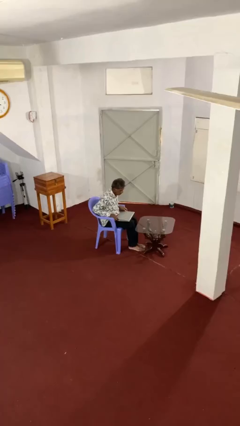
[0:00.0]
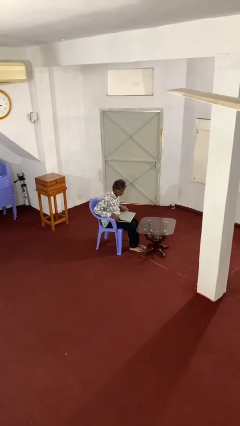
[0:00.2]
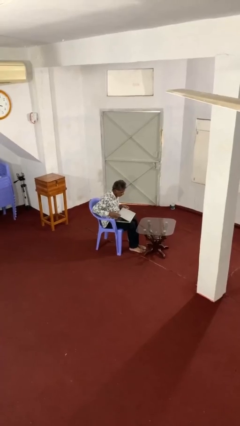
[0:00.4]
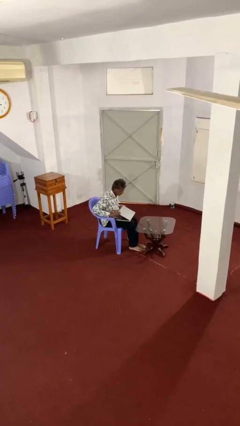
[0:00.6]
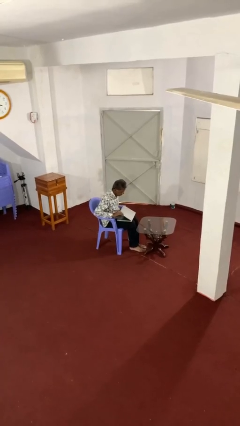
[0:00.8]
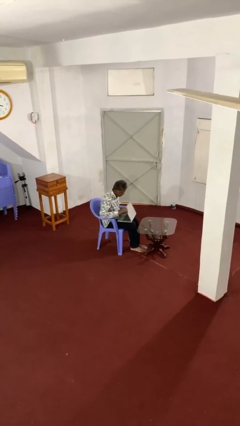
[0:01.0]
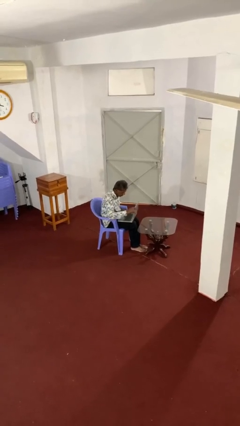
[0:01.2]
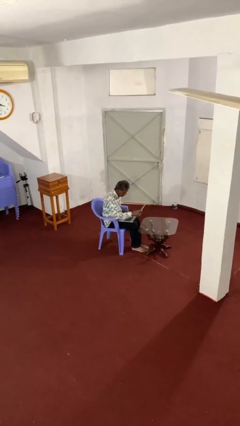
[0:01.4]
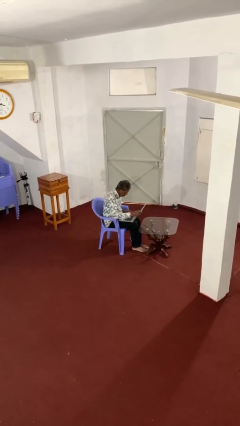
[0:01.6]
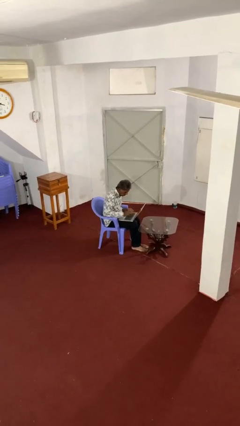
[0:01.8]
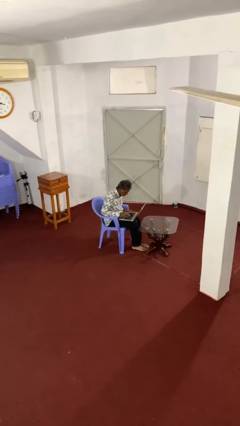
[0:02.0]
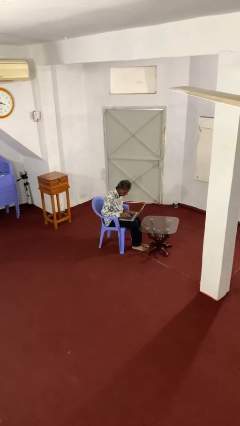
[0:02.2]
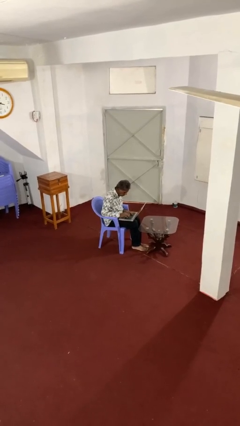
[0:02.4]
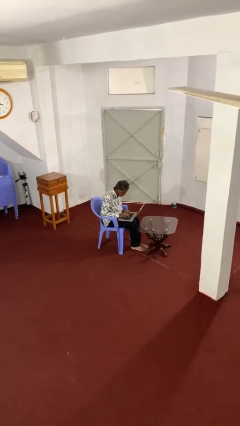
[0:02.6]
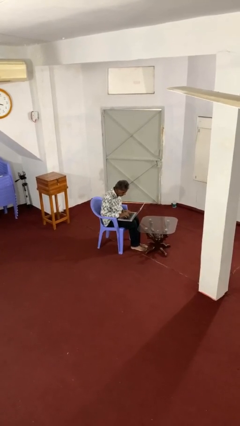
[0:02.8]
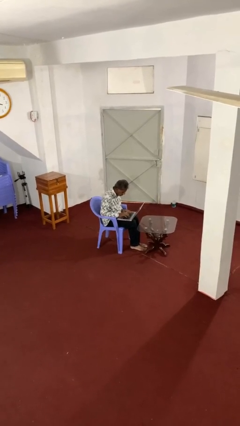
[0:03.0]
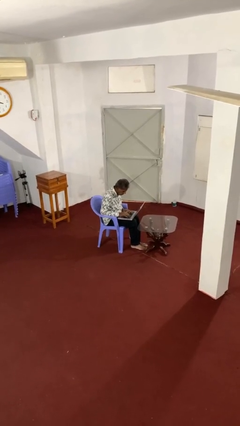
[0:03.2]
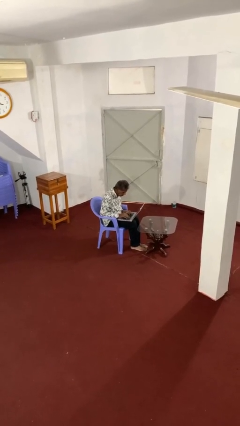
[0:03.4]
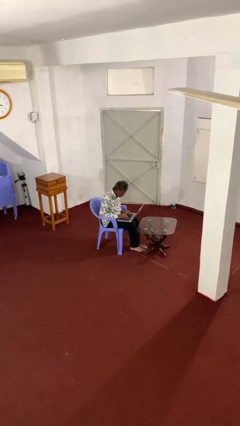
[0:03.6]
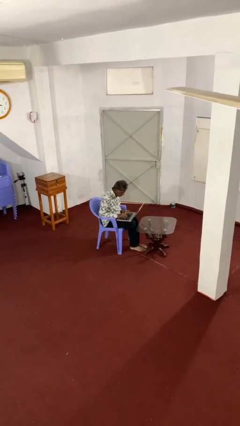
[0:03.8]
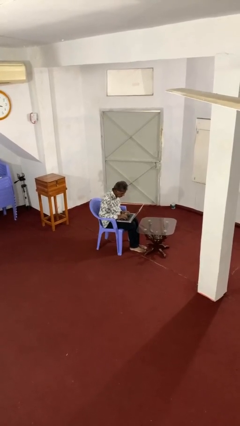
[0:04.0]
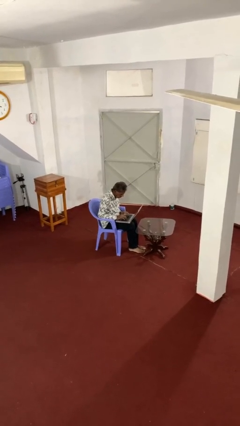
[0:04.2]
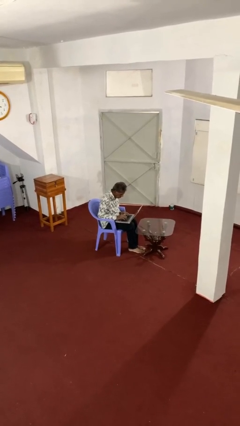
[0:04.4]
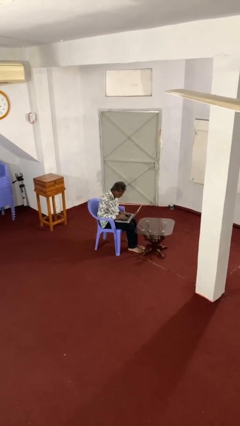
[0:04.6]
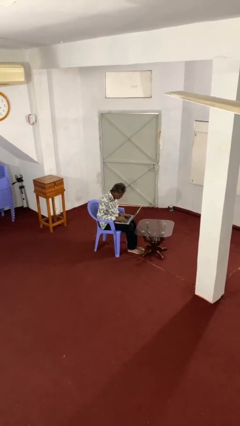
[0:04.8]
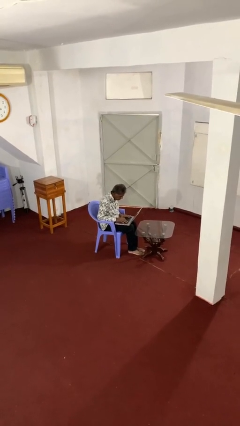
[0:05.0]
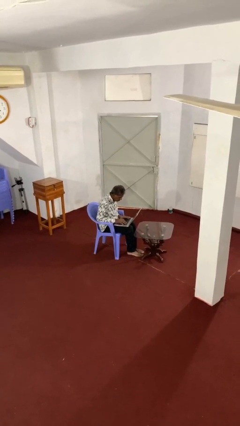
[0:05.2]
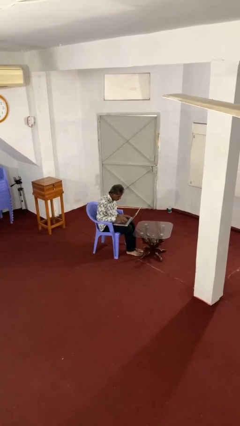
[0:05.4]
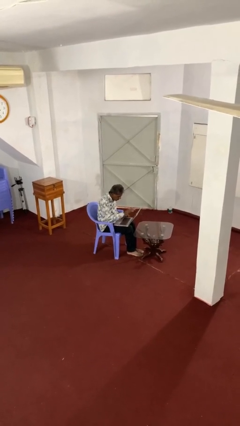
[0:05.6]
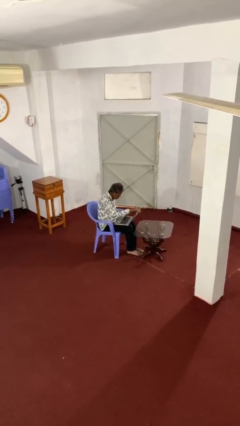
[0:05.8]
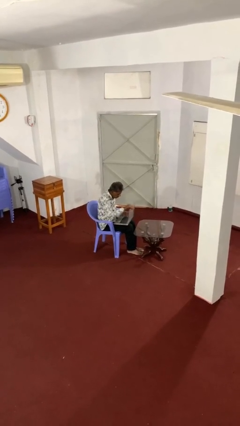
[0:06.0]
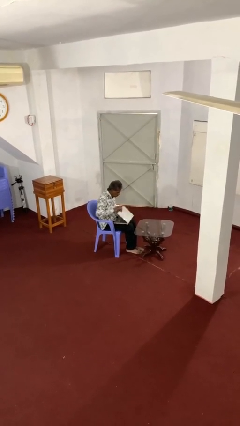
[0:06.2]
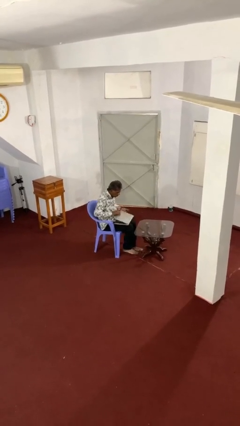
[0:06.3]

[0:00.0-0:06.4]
person interacts with laptop

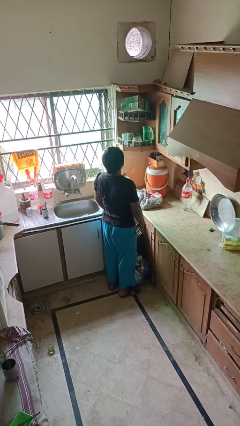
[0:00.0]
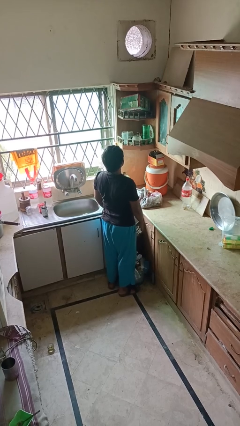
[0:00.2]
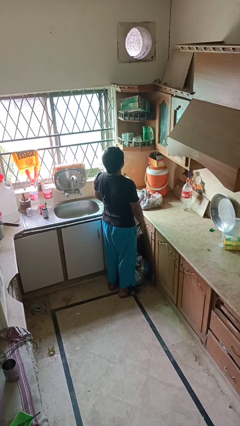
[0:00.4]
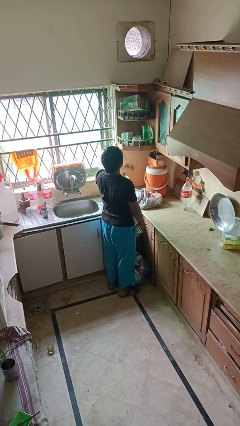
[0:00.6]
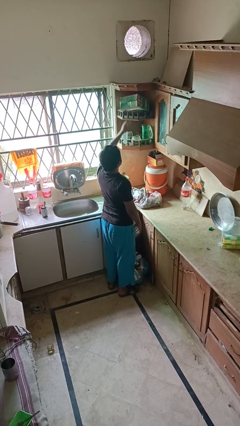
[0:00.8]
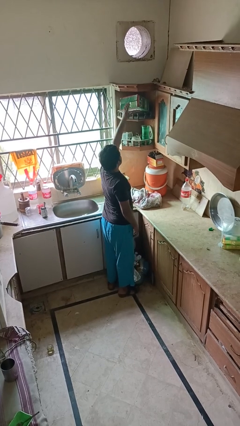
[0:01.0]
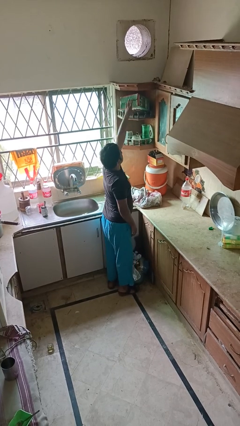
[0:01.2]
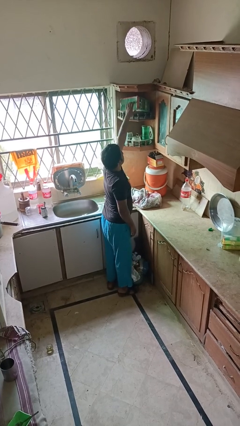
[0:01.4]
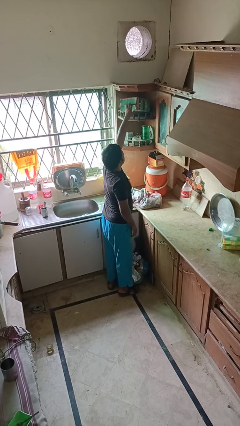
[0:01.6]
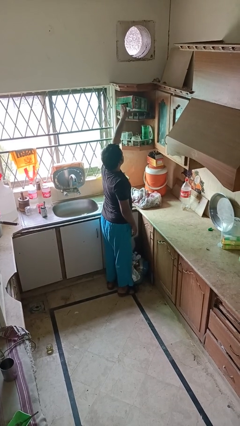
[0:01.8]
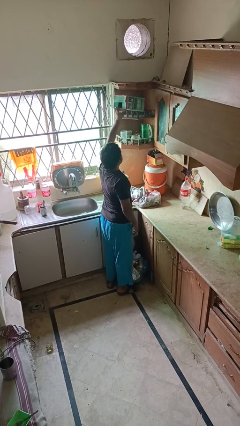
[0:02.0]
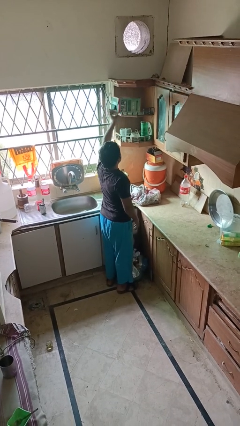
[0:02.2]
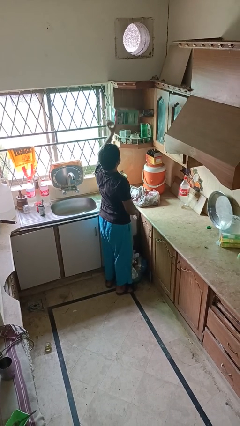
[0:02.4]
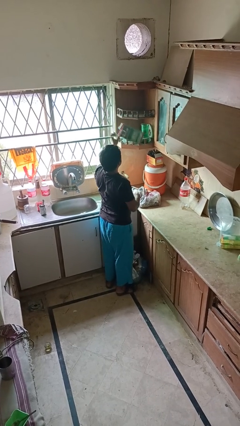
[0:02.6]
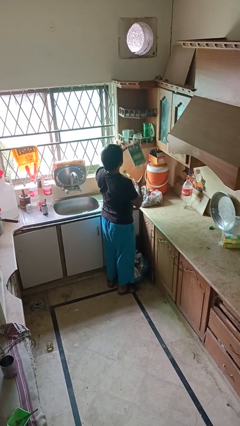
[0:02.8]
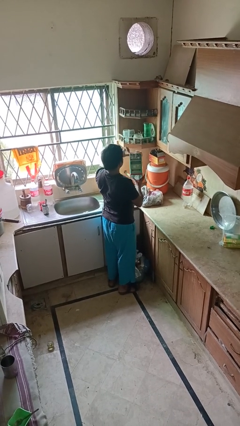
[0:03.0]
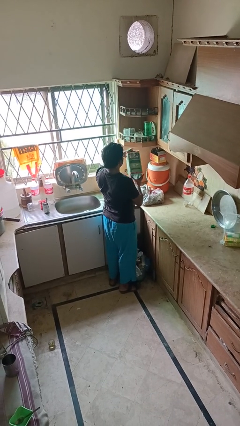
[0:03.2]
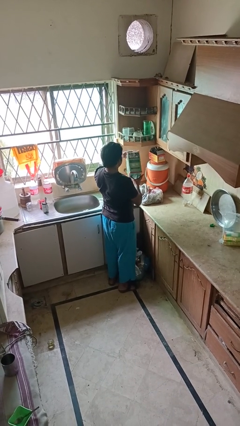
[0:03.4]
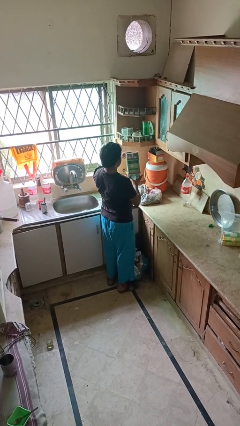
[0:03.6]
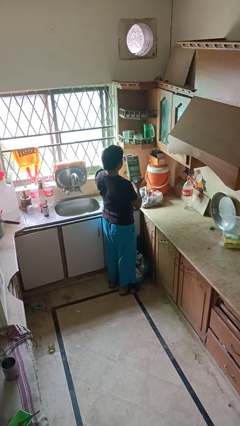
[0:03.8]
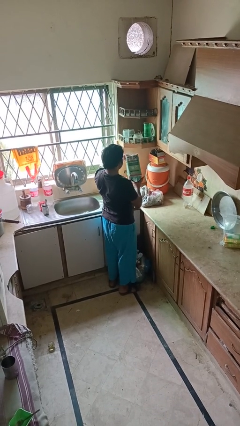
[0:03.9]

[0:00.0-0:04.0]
person picks up object from shelf

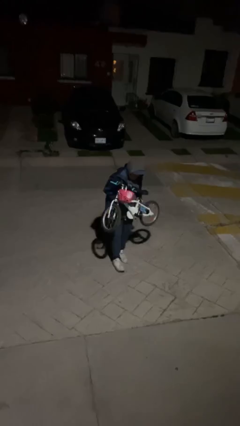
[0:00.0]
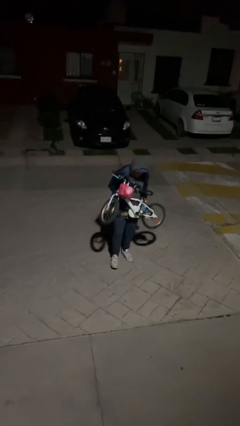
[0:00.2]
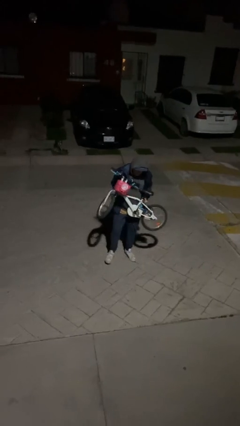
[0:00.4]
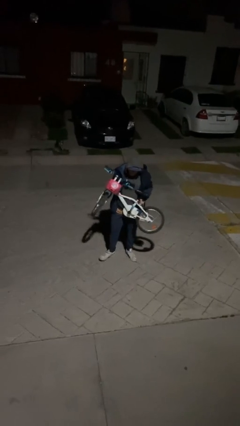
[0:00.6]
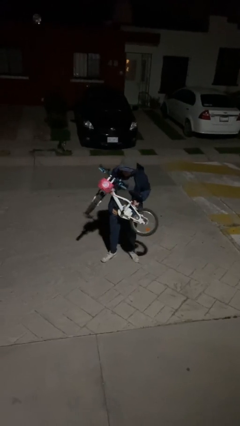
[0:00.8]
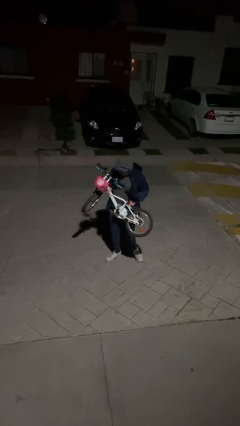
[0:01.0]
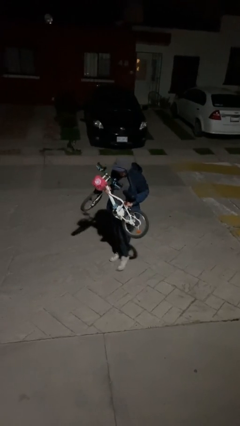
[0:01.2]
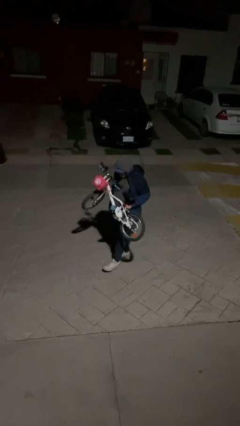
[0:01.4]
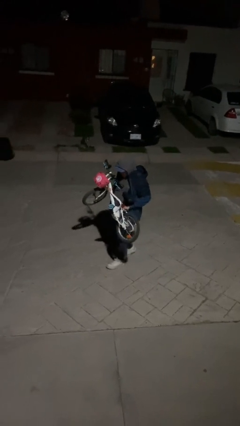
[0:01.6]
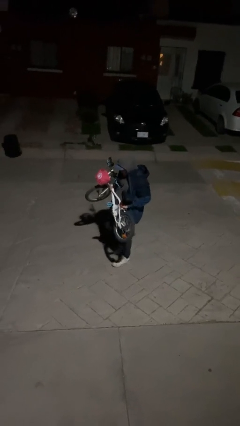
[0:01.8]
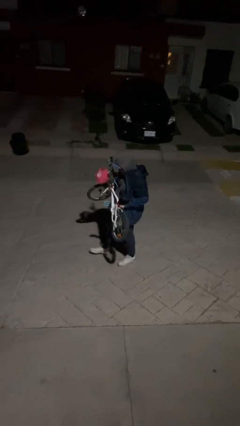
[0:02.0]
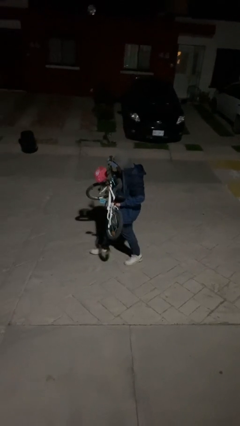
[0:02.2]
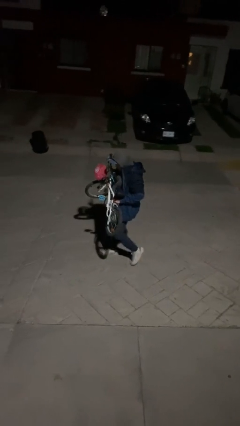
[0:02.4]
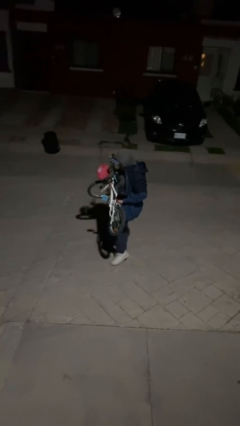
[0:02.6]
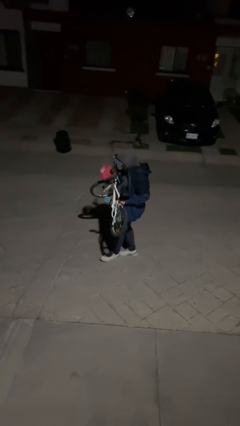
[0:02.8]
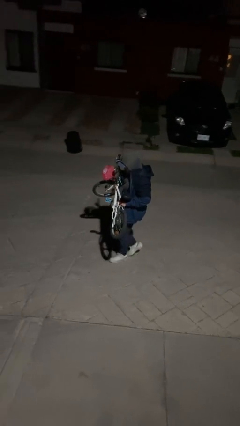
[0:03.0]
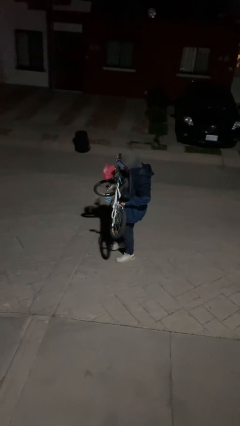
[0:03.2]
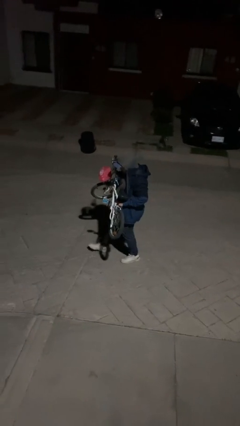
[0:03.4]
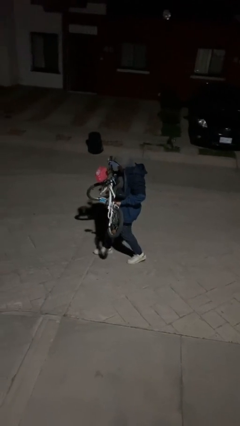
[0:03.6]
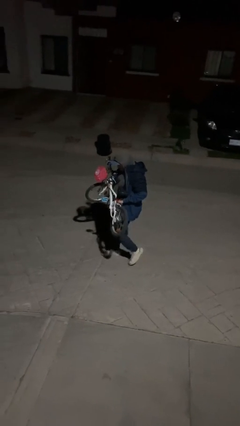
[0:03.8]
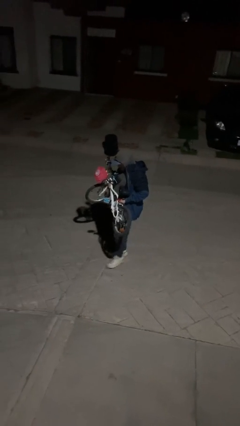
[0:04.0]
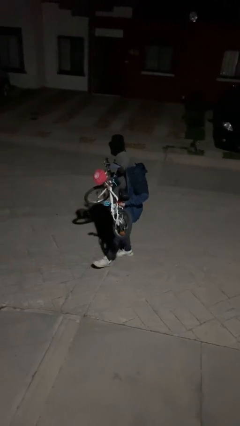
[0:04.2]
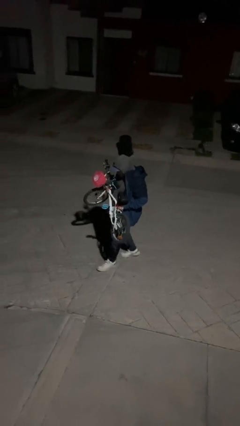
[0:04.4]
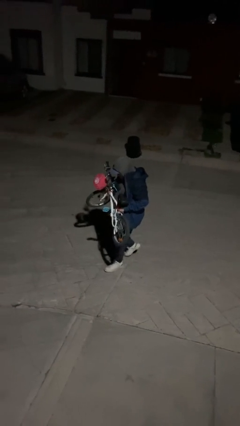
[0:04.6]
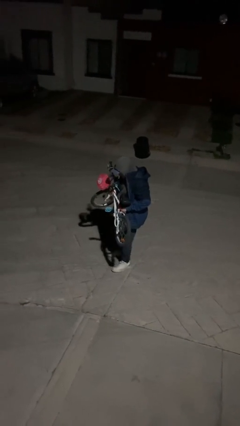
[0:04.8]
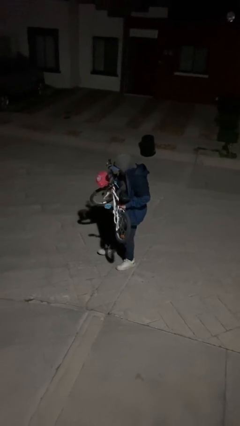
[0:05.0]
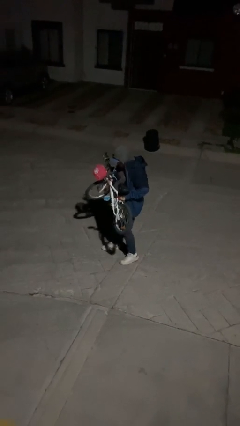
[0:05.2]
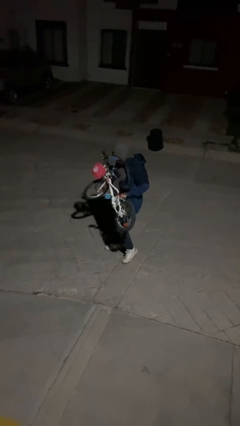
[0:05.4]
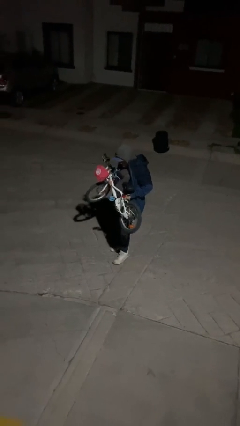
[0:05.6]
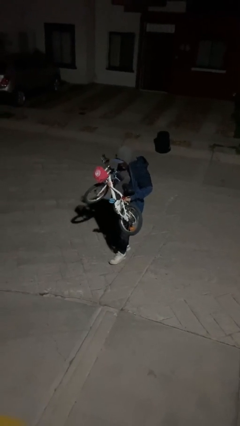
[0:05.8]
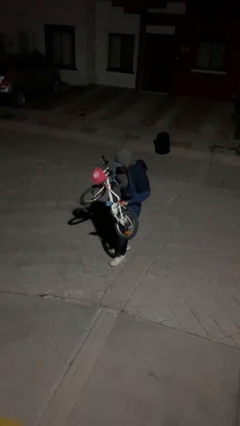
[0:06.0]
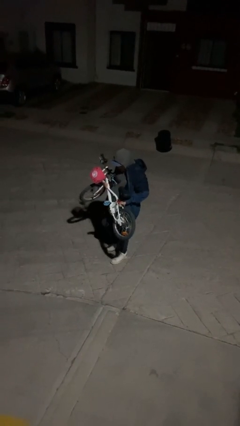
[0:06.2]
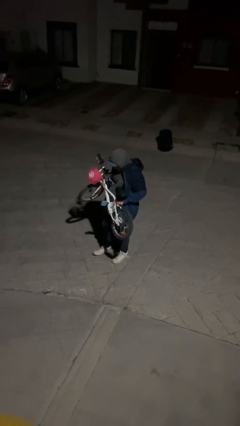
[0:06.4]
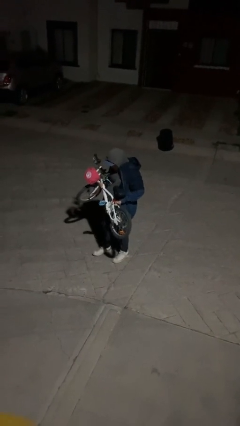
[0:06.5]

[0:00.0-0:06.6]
person carries heavy object

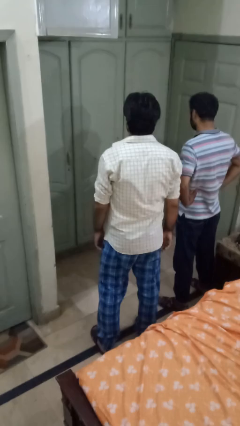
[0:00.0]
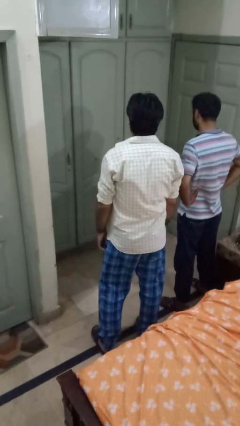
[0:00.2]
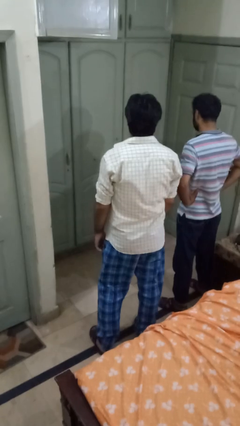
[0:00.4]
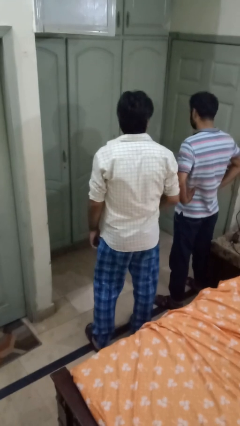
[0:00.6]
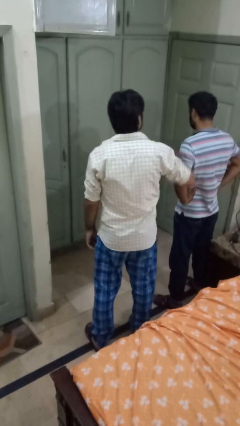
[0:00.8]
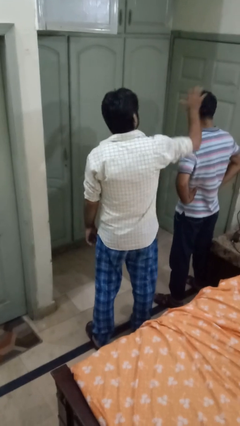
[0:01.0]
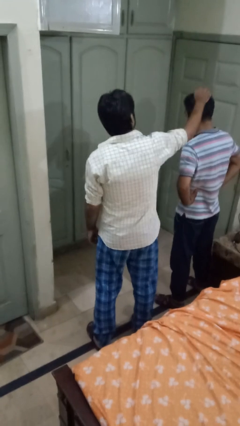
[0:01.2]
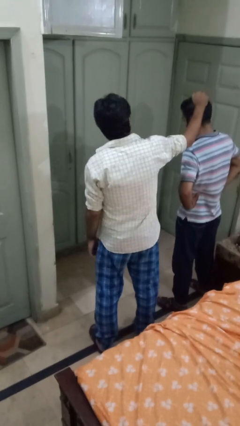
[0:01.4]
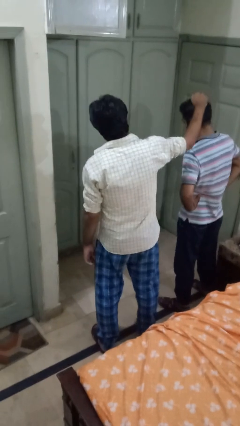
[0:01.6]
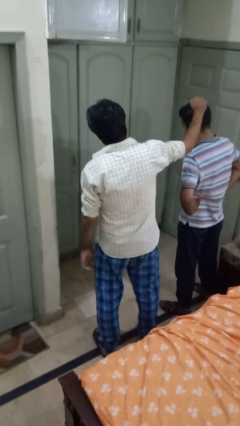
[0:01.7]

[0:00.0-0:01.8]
person grabs person by hair
